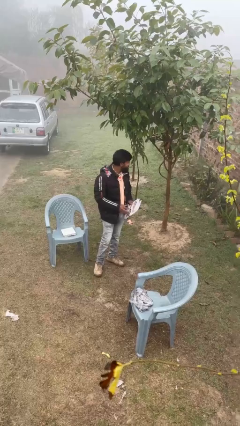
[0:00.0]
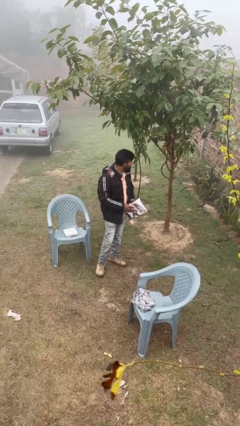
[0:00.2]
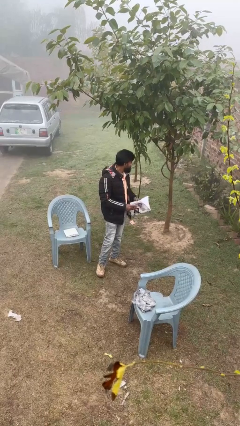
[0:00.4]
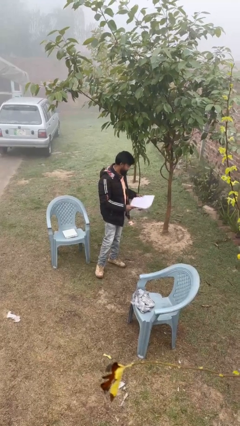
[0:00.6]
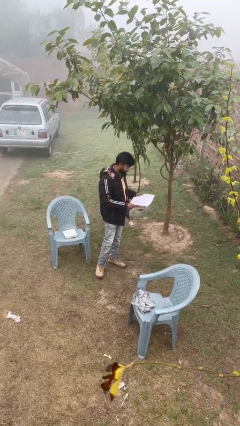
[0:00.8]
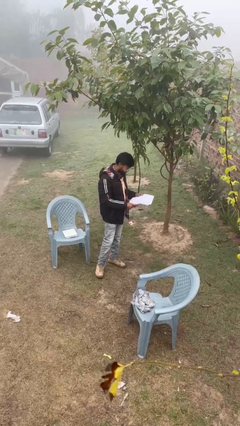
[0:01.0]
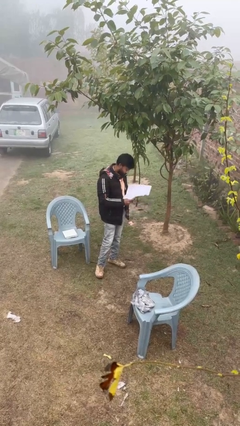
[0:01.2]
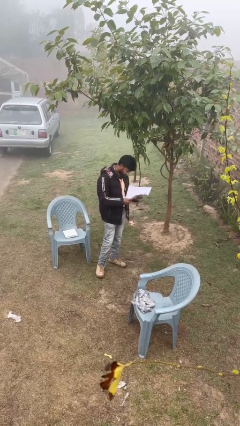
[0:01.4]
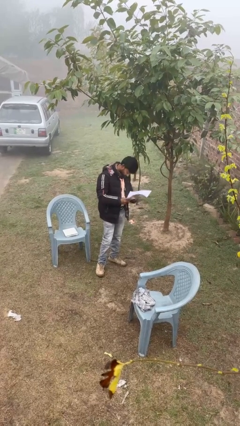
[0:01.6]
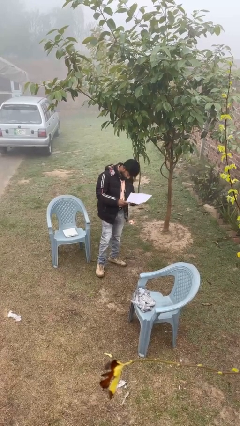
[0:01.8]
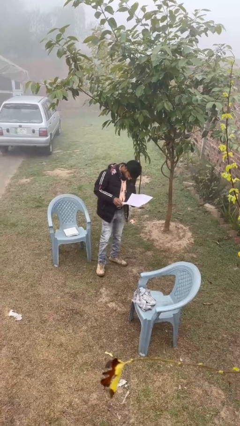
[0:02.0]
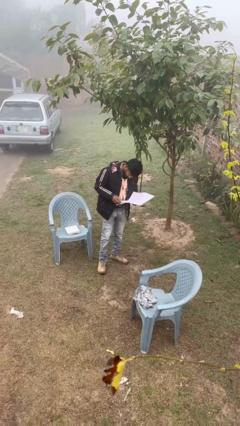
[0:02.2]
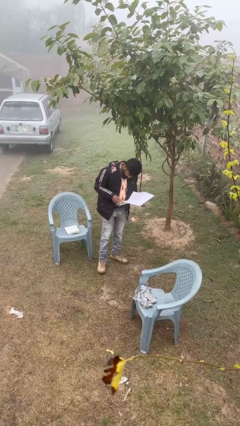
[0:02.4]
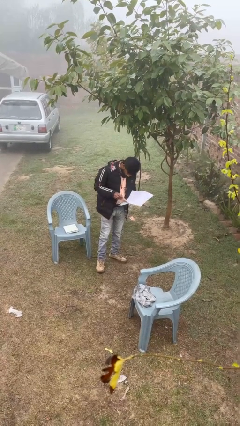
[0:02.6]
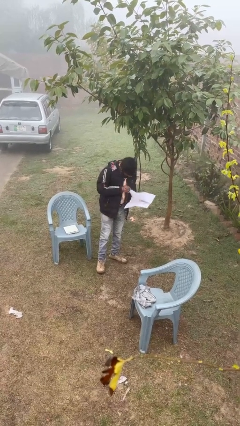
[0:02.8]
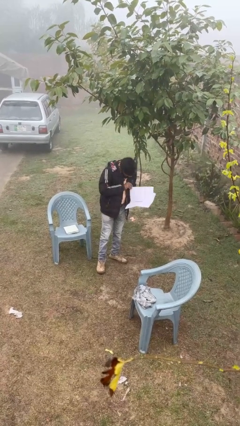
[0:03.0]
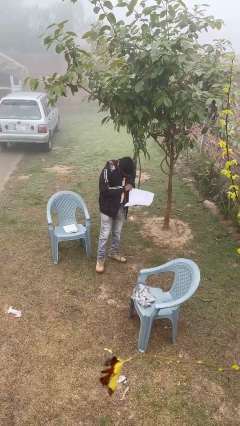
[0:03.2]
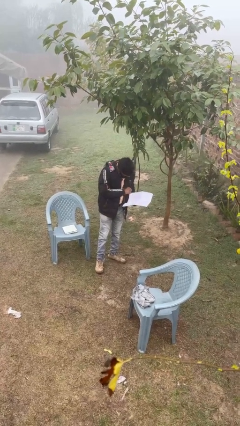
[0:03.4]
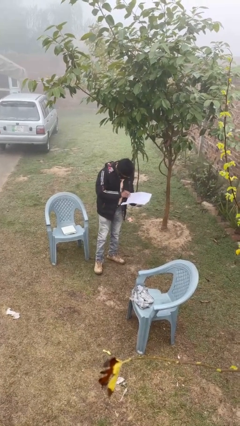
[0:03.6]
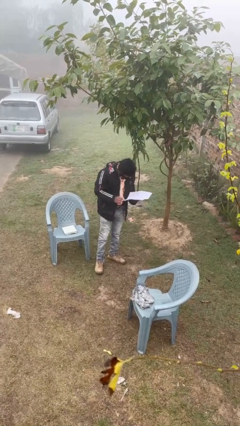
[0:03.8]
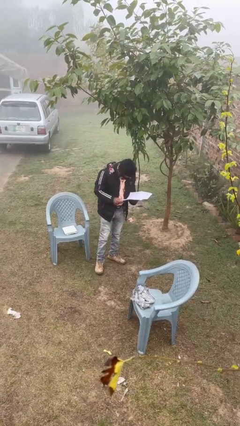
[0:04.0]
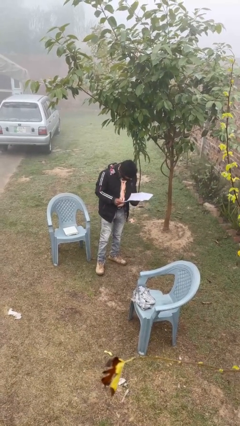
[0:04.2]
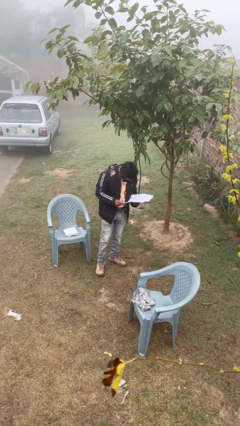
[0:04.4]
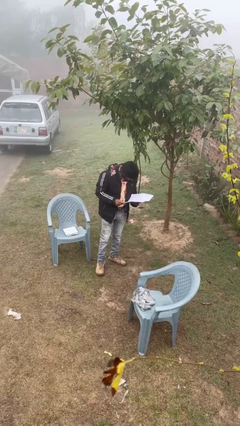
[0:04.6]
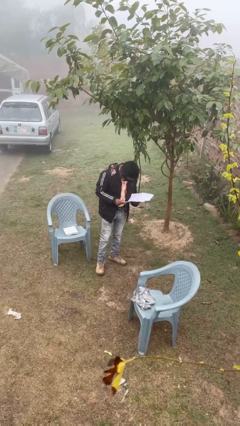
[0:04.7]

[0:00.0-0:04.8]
person reads document

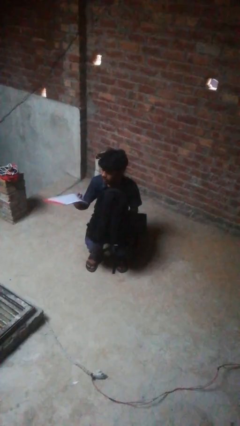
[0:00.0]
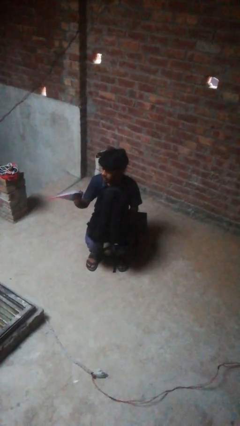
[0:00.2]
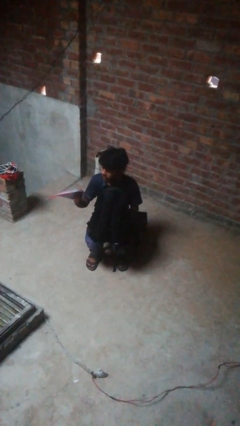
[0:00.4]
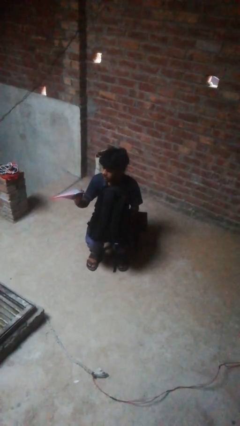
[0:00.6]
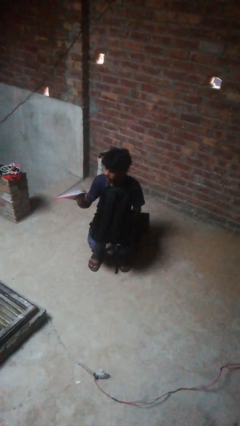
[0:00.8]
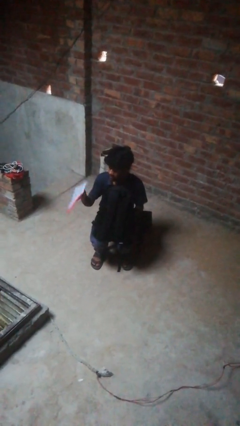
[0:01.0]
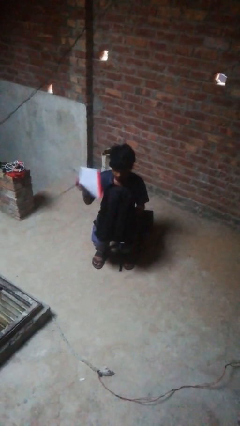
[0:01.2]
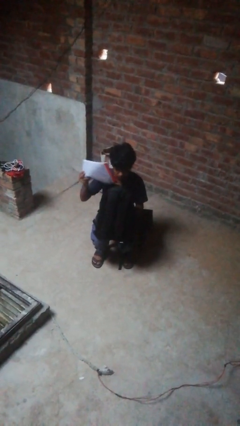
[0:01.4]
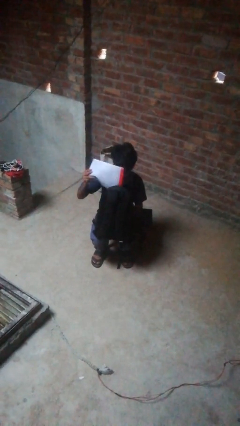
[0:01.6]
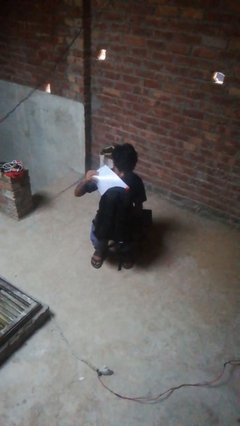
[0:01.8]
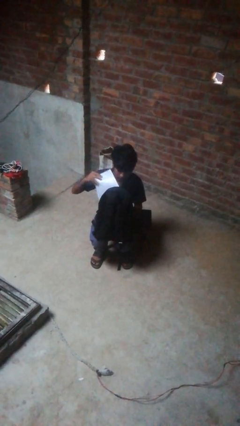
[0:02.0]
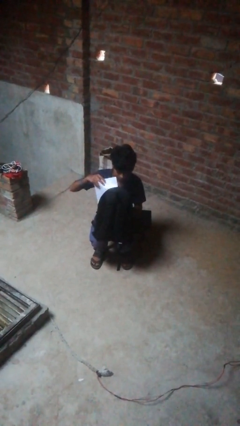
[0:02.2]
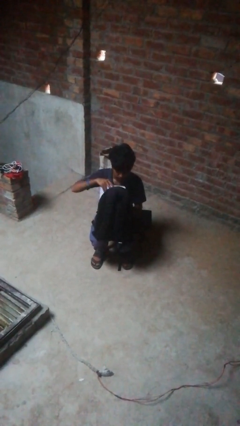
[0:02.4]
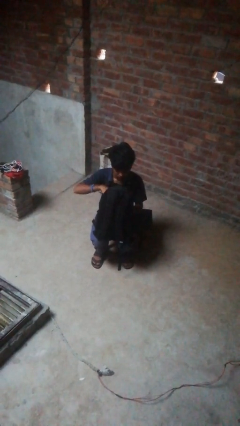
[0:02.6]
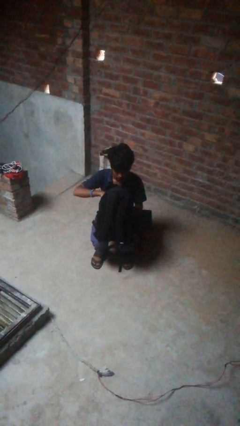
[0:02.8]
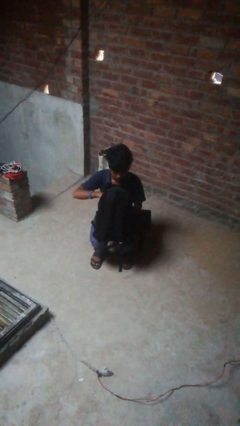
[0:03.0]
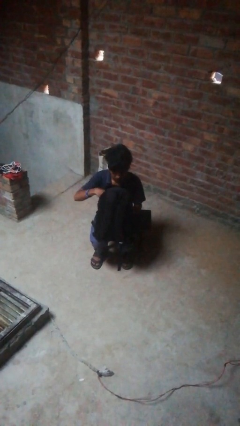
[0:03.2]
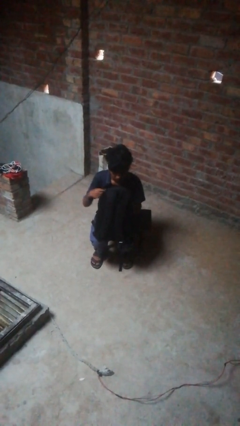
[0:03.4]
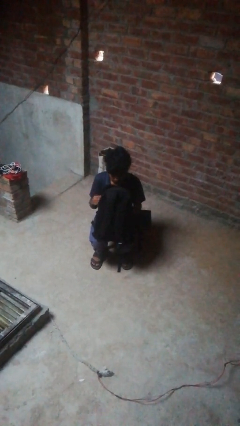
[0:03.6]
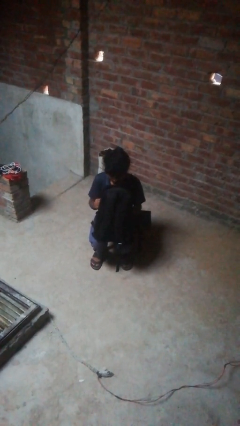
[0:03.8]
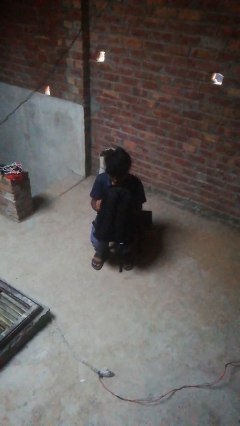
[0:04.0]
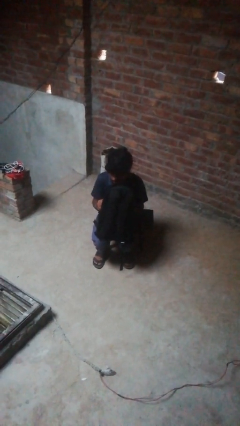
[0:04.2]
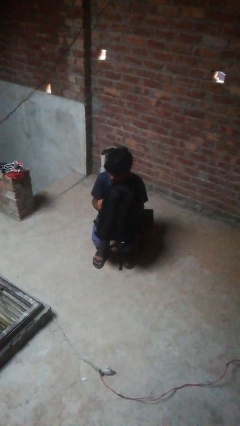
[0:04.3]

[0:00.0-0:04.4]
person puts object into backpack

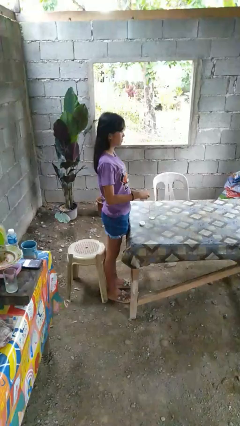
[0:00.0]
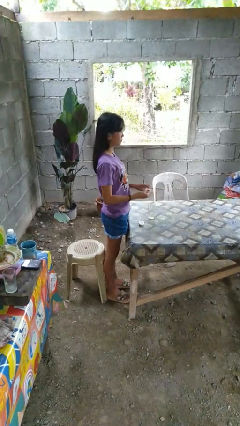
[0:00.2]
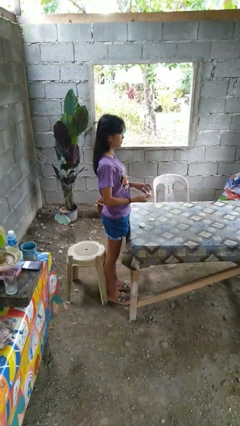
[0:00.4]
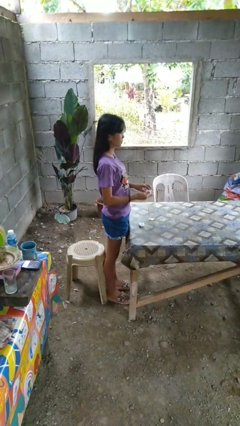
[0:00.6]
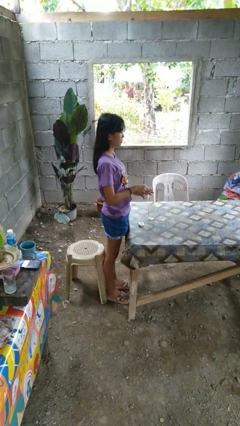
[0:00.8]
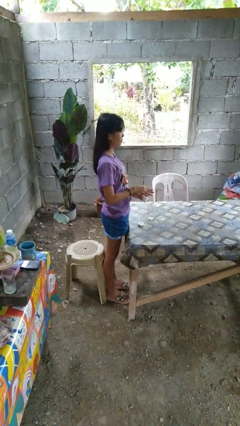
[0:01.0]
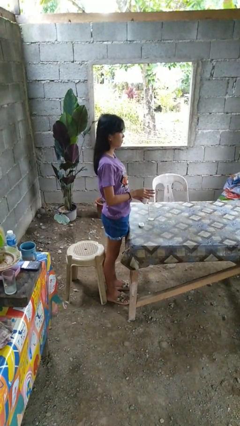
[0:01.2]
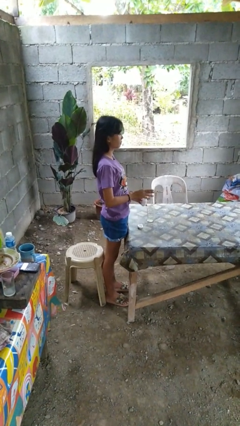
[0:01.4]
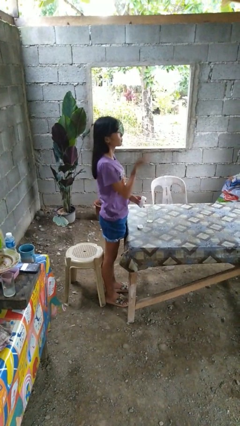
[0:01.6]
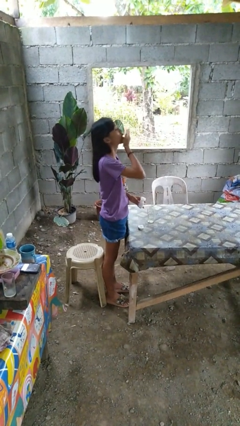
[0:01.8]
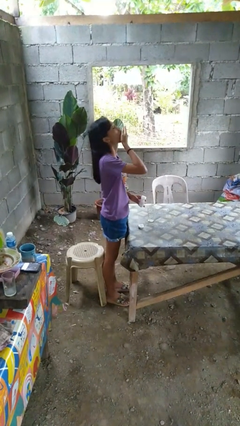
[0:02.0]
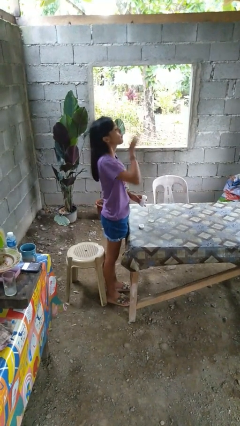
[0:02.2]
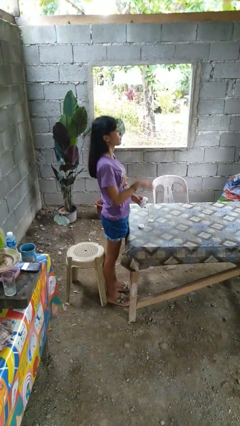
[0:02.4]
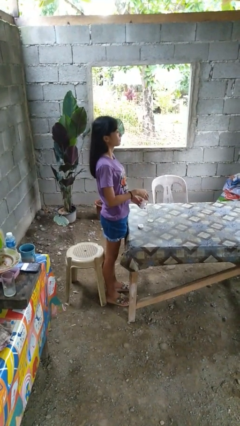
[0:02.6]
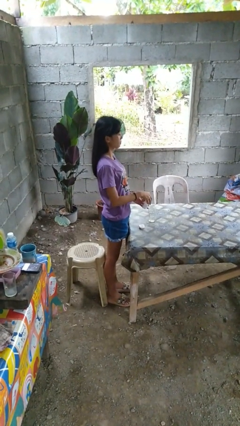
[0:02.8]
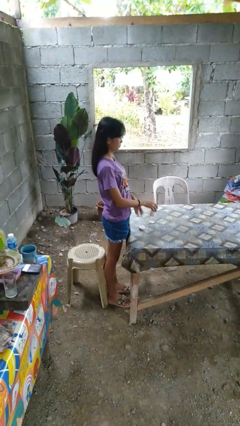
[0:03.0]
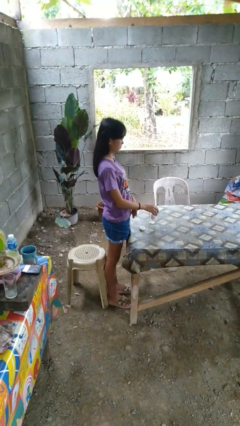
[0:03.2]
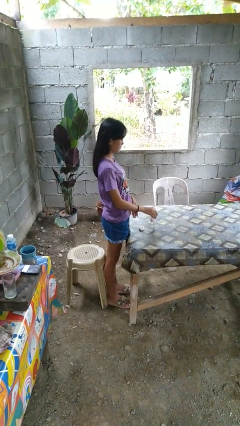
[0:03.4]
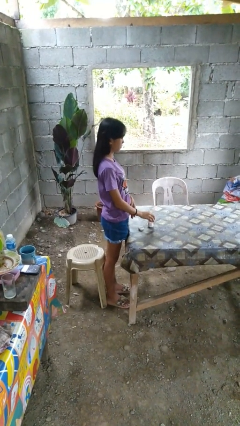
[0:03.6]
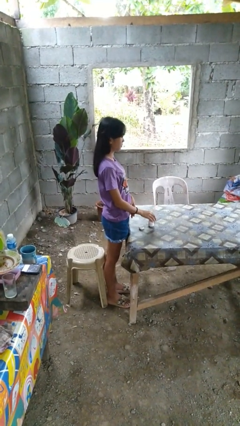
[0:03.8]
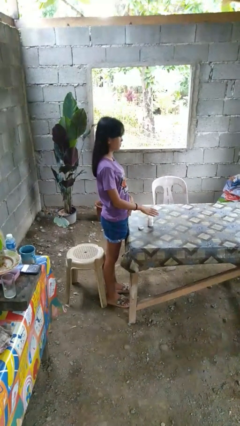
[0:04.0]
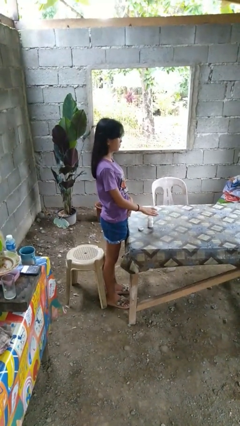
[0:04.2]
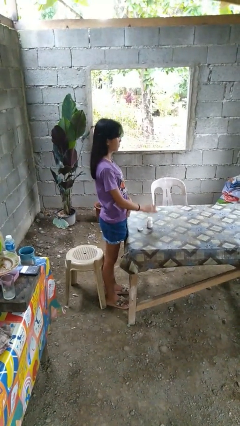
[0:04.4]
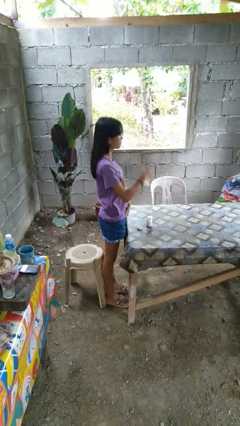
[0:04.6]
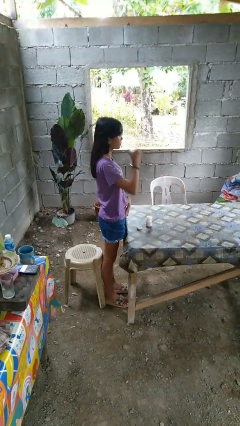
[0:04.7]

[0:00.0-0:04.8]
person takes medicine pills

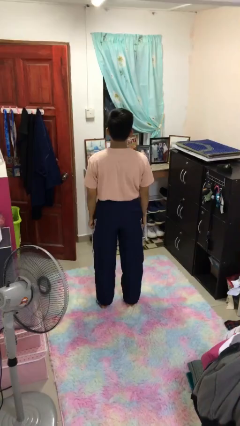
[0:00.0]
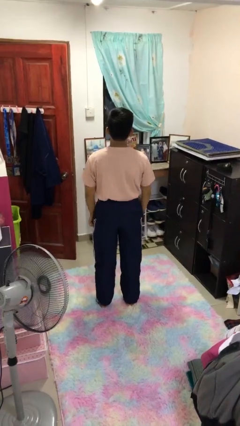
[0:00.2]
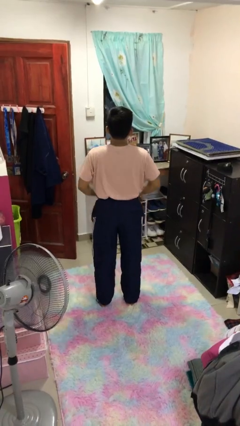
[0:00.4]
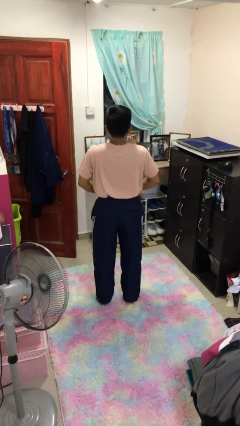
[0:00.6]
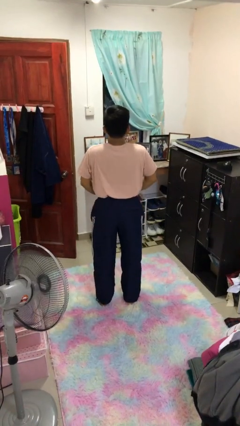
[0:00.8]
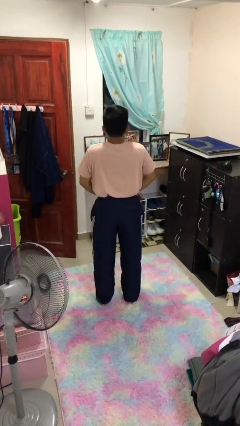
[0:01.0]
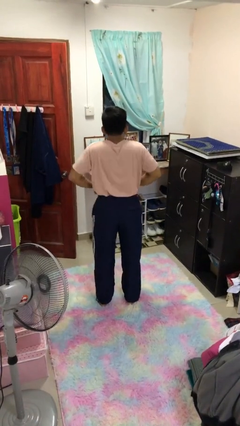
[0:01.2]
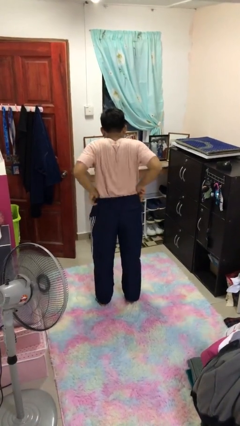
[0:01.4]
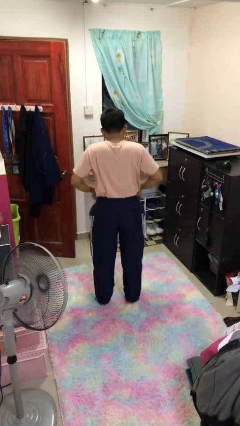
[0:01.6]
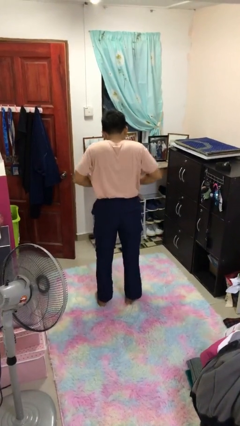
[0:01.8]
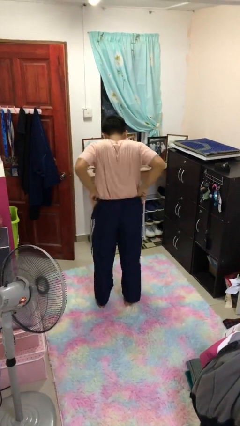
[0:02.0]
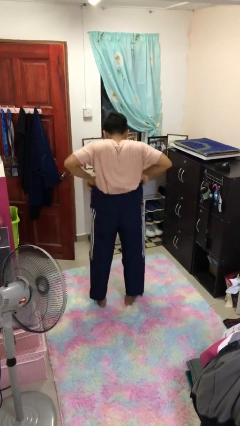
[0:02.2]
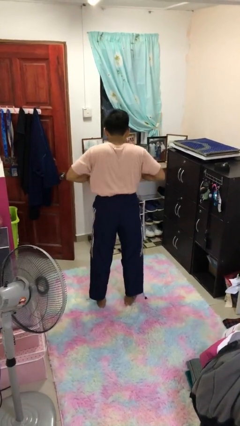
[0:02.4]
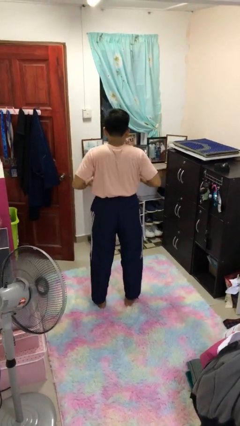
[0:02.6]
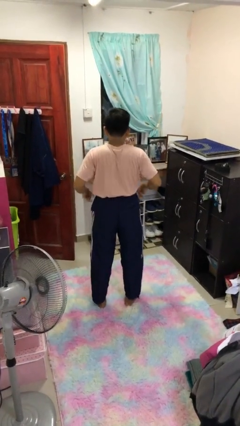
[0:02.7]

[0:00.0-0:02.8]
person hikes up pants

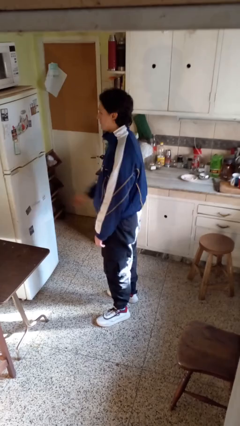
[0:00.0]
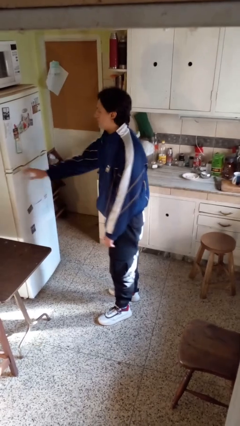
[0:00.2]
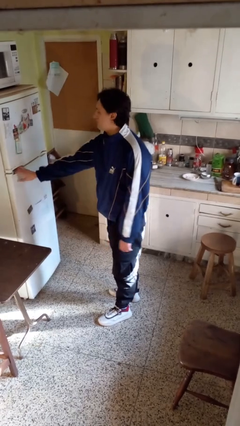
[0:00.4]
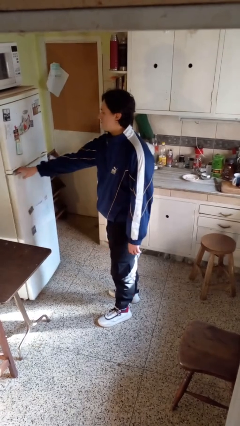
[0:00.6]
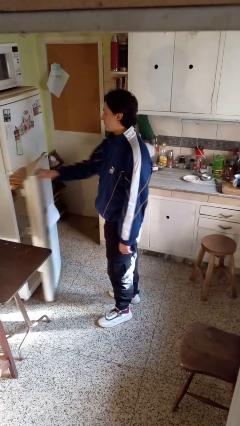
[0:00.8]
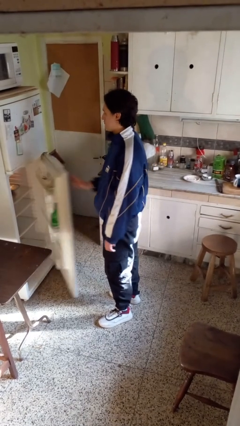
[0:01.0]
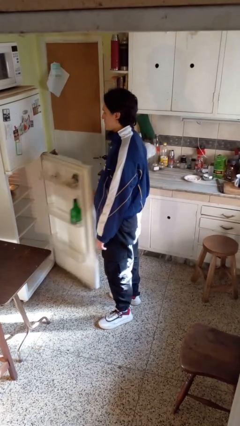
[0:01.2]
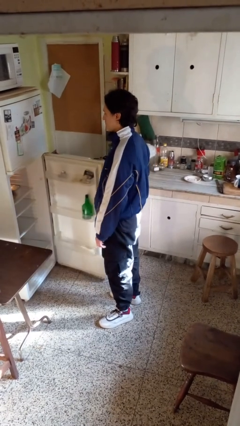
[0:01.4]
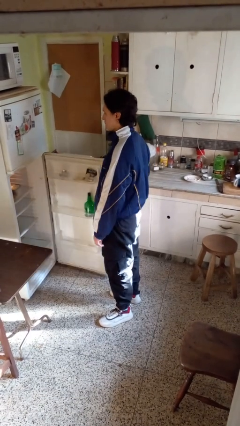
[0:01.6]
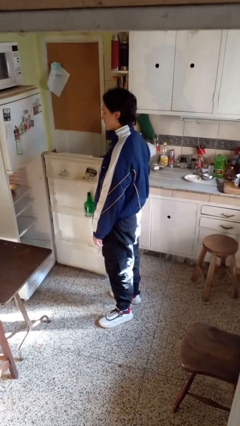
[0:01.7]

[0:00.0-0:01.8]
person opens refrigerator
